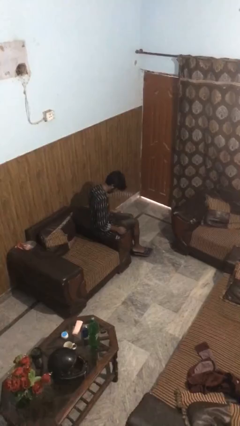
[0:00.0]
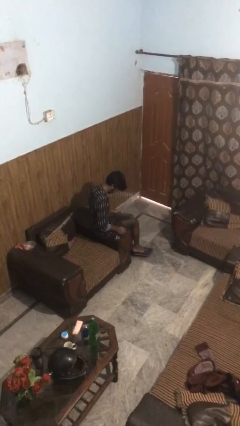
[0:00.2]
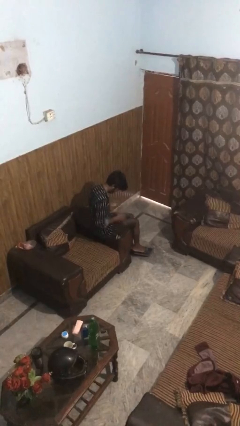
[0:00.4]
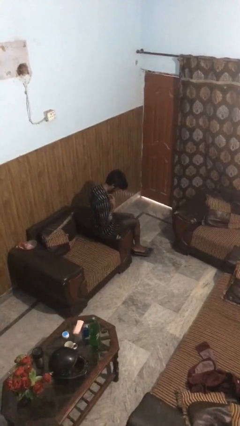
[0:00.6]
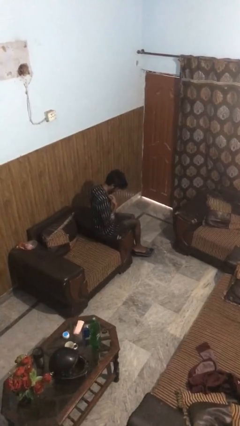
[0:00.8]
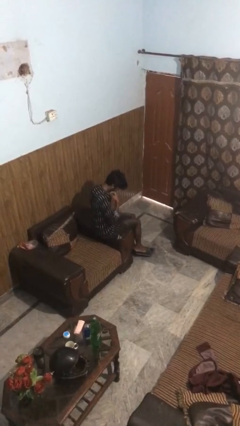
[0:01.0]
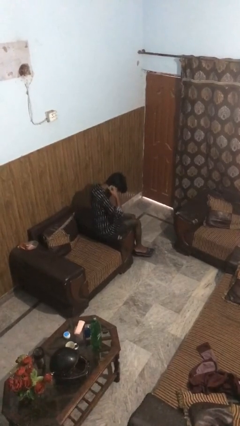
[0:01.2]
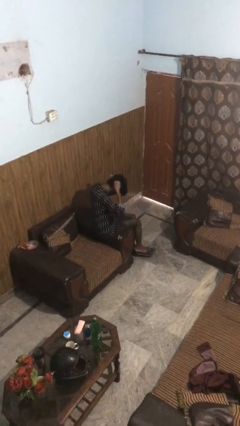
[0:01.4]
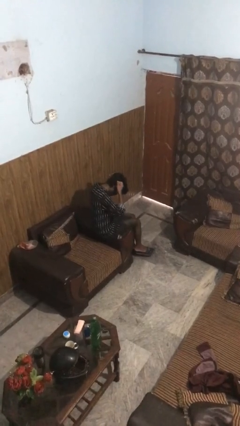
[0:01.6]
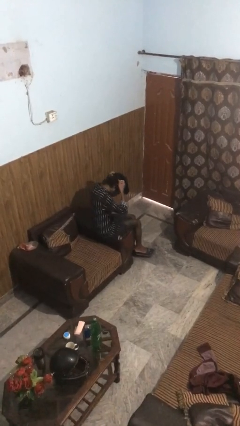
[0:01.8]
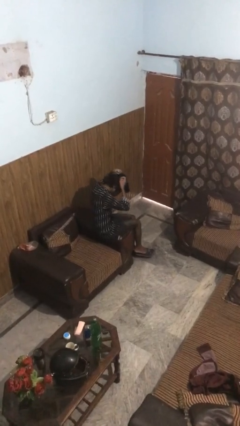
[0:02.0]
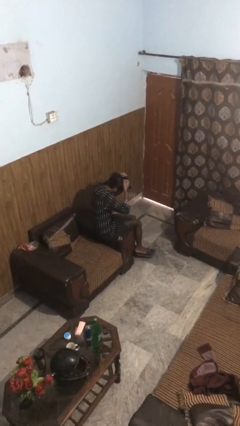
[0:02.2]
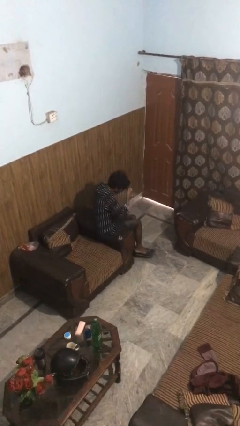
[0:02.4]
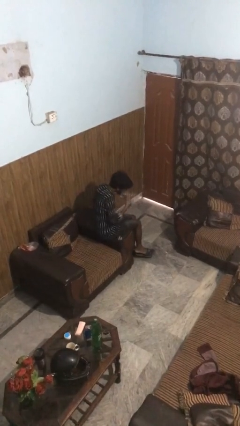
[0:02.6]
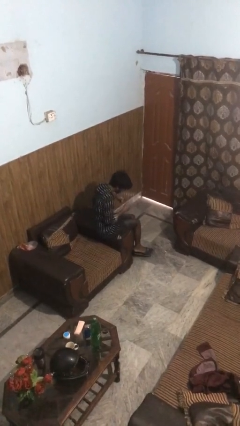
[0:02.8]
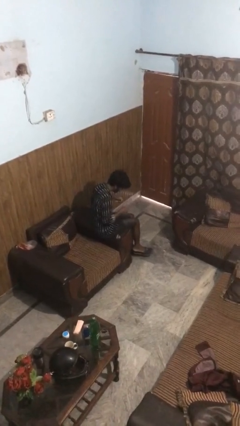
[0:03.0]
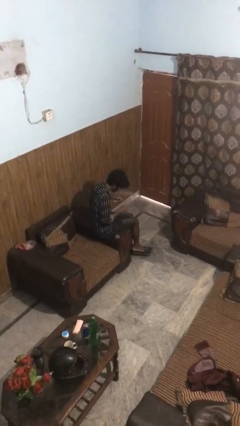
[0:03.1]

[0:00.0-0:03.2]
person takes off necklace

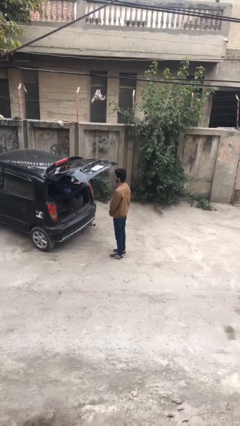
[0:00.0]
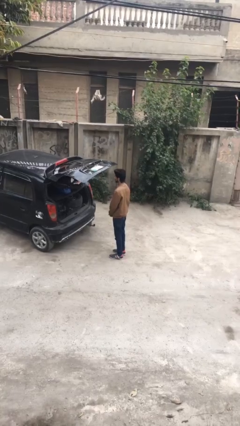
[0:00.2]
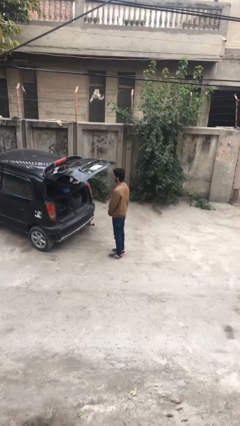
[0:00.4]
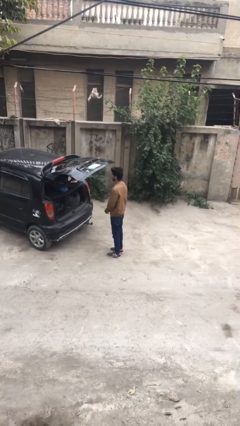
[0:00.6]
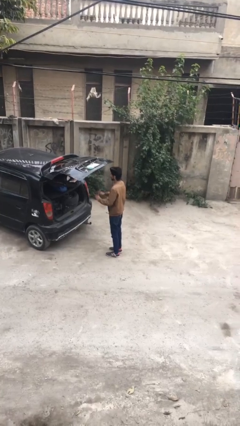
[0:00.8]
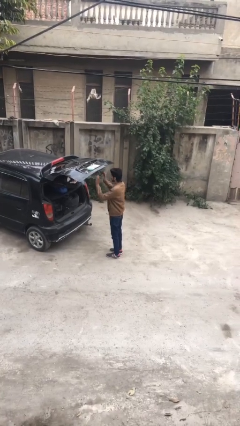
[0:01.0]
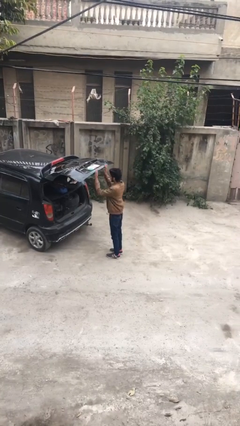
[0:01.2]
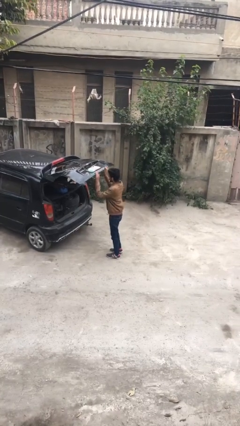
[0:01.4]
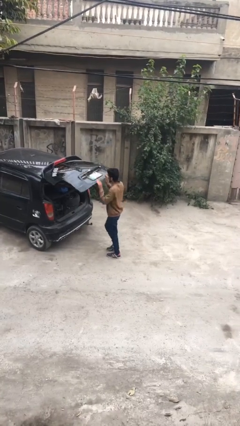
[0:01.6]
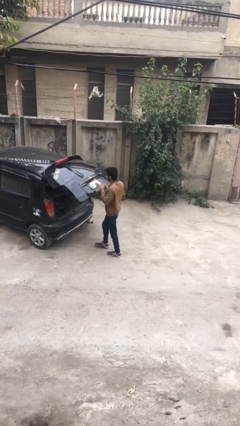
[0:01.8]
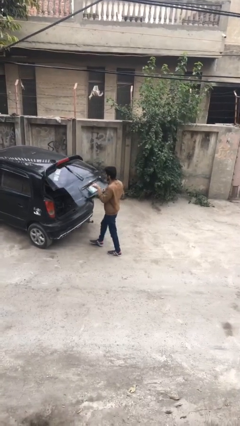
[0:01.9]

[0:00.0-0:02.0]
person closes car trunk

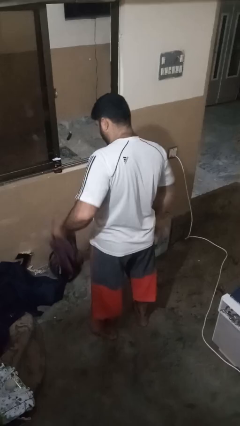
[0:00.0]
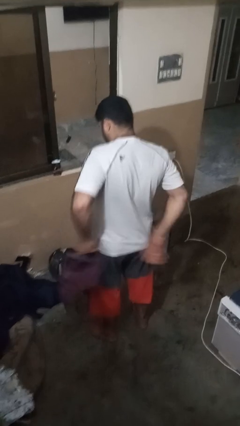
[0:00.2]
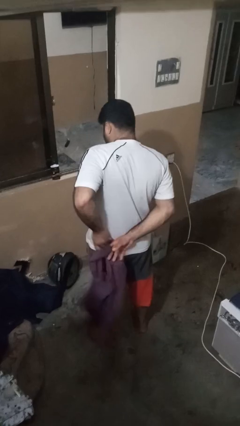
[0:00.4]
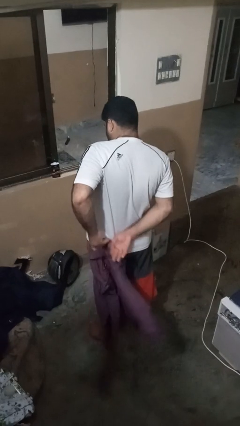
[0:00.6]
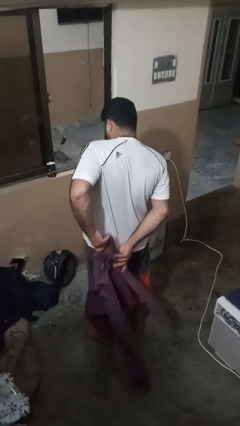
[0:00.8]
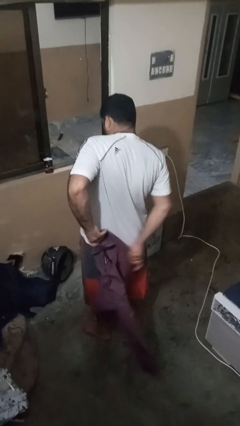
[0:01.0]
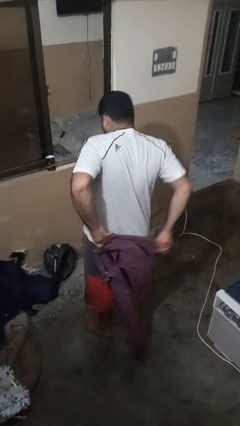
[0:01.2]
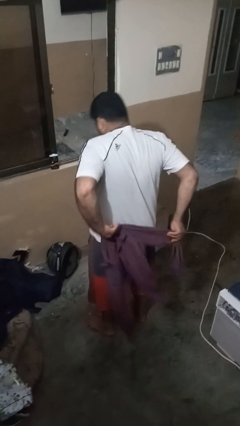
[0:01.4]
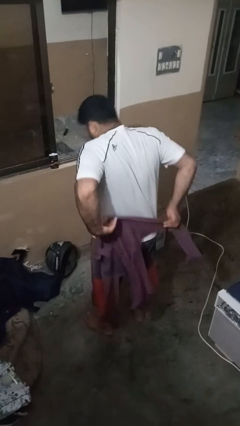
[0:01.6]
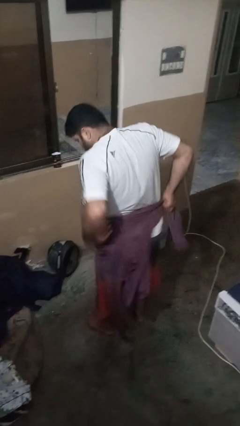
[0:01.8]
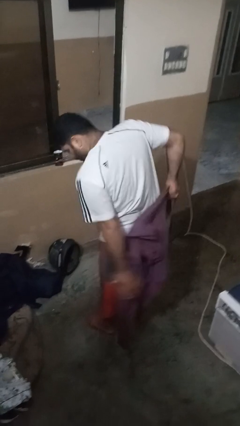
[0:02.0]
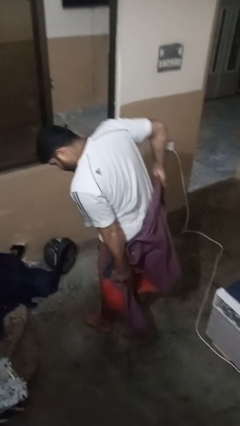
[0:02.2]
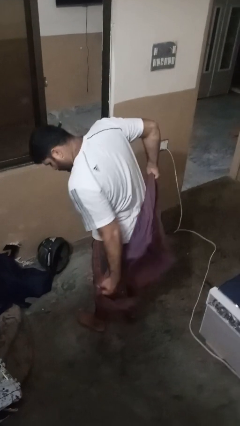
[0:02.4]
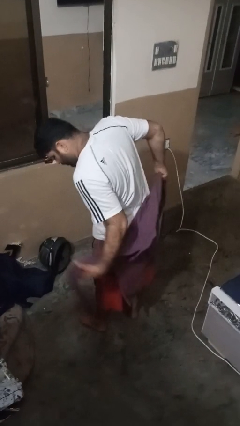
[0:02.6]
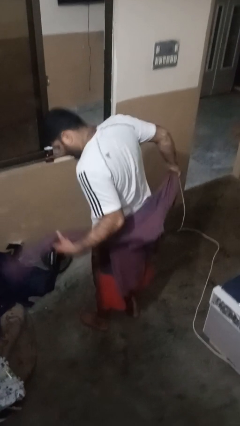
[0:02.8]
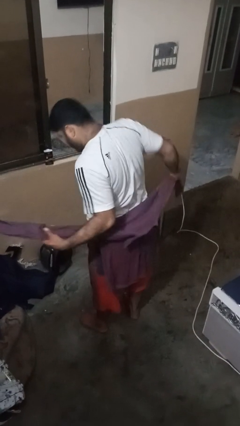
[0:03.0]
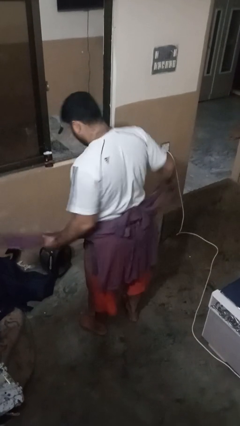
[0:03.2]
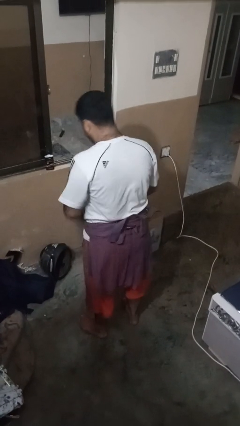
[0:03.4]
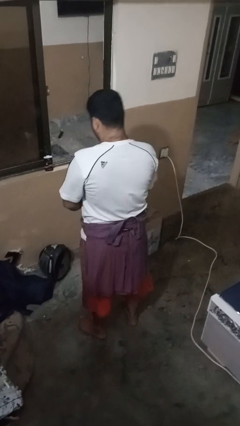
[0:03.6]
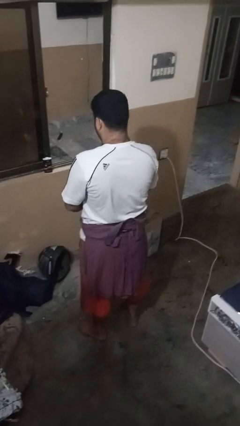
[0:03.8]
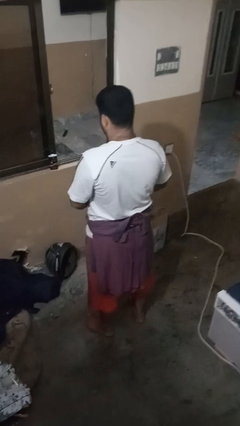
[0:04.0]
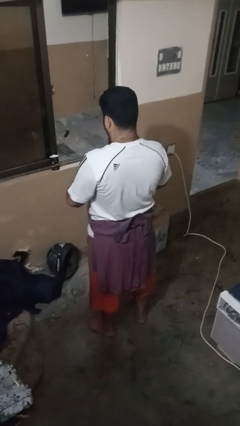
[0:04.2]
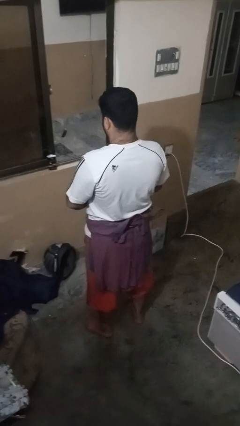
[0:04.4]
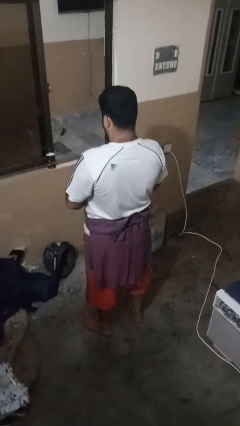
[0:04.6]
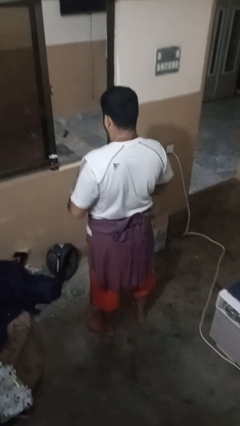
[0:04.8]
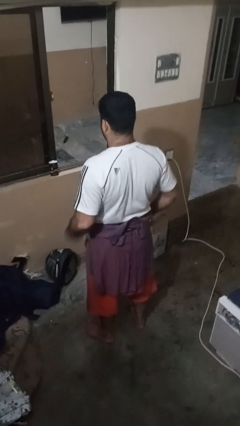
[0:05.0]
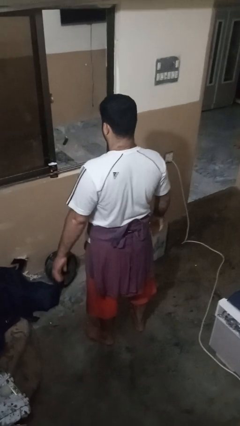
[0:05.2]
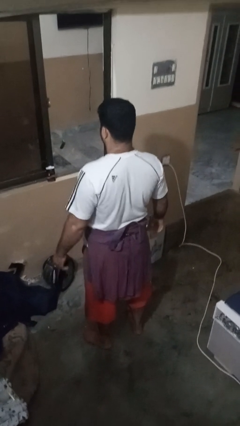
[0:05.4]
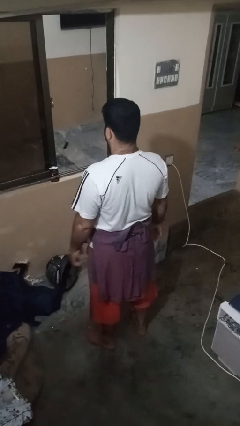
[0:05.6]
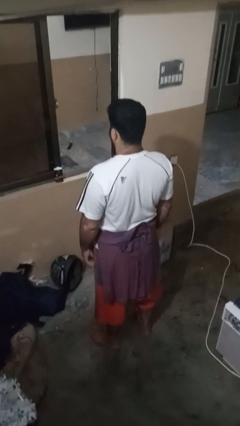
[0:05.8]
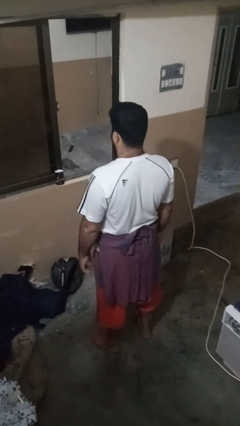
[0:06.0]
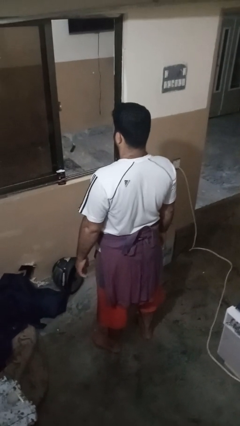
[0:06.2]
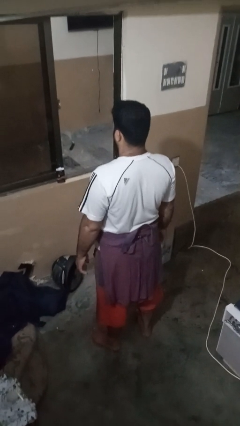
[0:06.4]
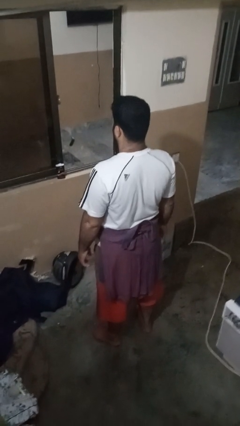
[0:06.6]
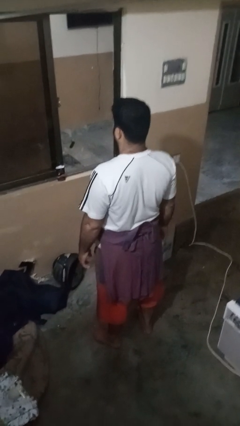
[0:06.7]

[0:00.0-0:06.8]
person ties jacket around waist

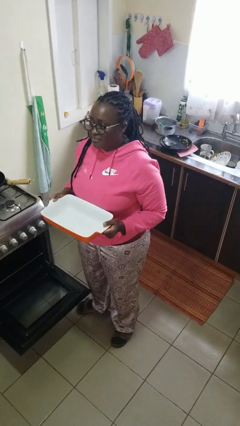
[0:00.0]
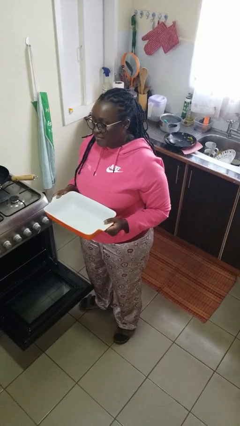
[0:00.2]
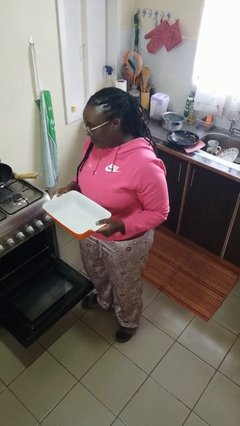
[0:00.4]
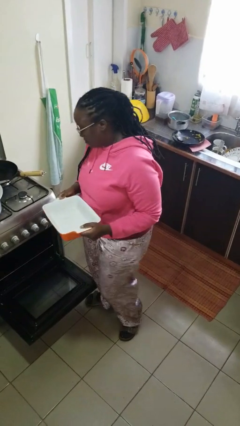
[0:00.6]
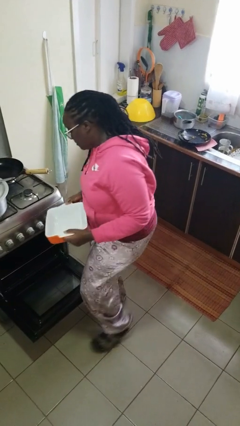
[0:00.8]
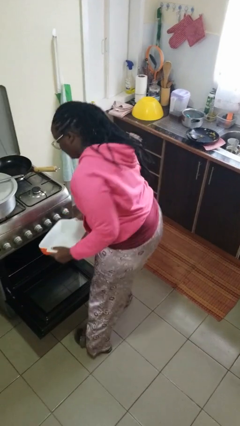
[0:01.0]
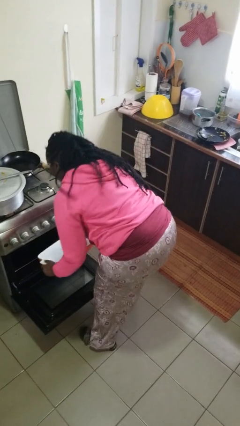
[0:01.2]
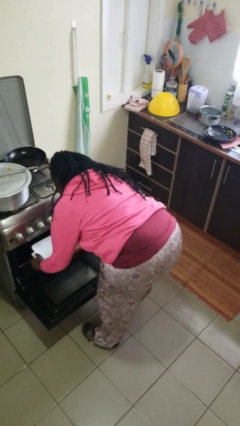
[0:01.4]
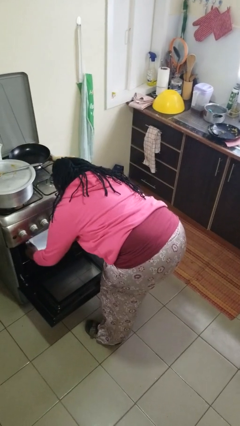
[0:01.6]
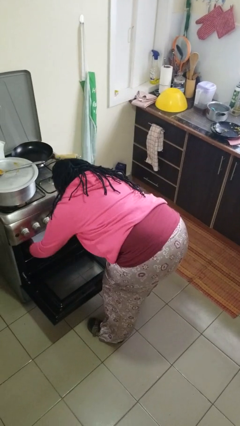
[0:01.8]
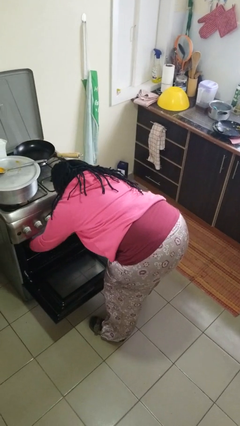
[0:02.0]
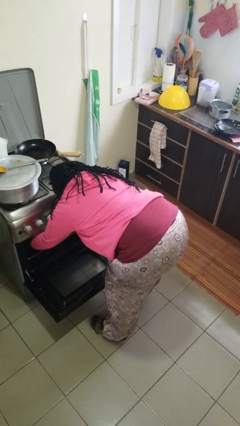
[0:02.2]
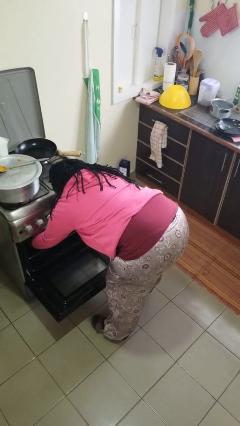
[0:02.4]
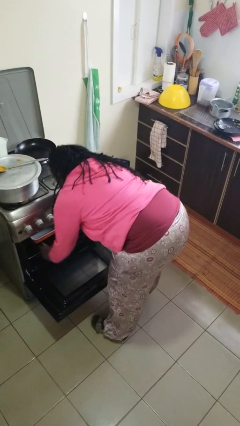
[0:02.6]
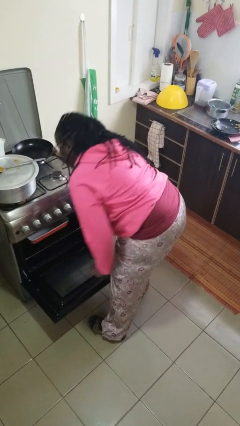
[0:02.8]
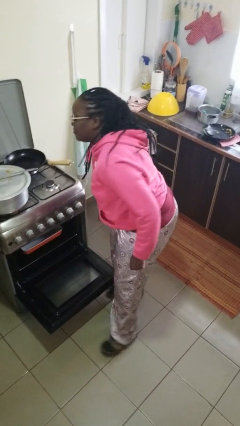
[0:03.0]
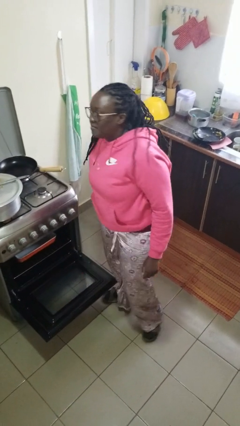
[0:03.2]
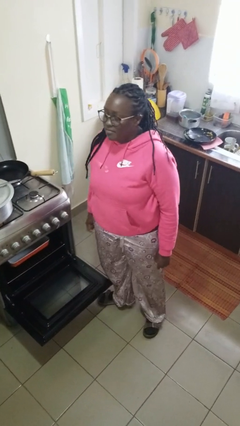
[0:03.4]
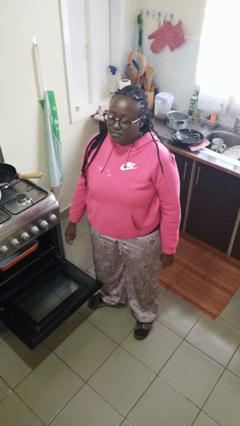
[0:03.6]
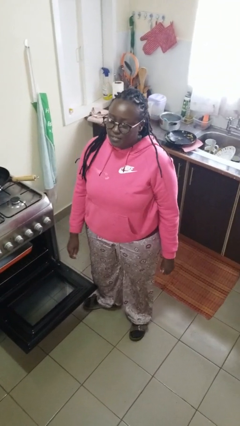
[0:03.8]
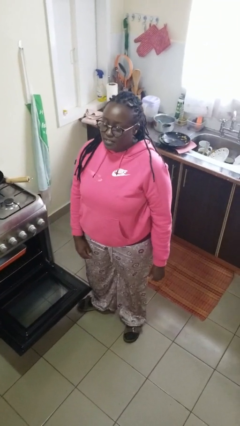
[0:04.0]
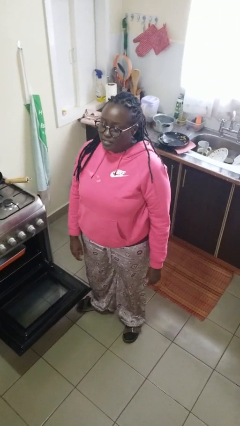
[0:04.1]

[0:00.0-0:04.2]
person puts object into oven

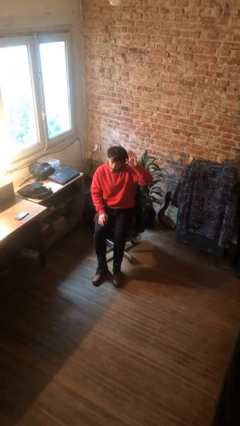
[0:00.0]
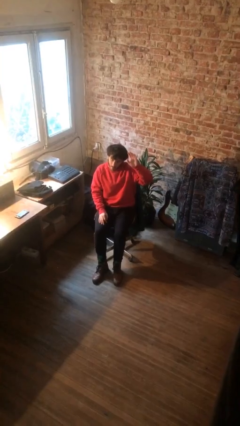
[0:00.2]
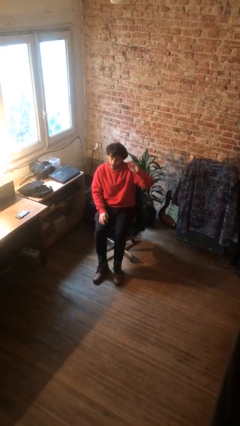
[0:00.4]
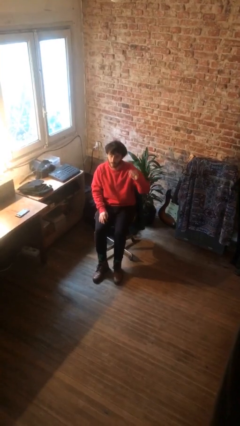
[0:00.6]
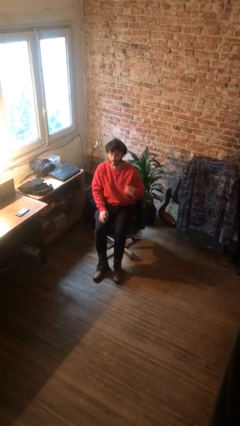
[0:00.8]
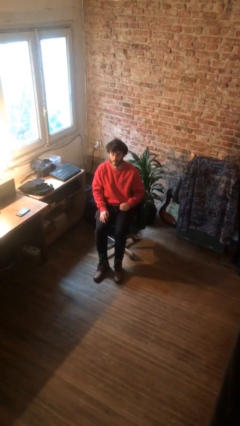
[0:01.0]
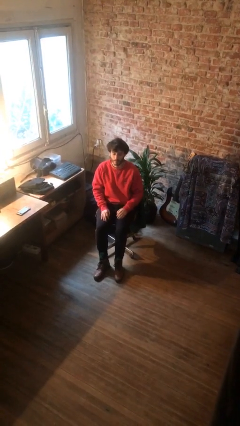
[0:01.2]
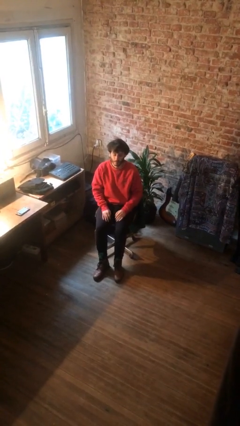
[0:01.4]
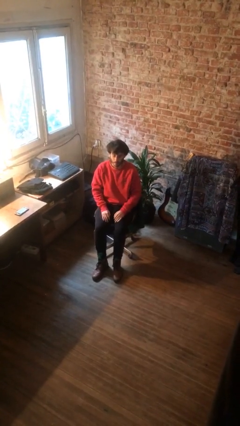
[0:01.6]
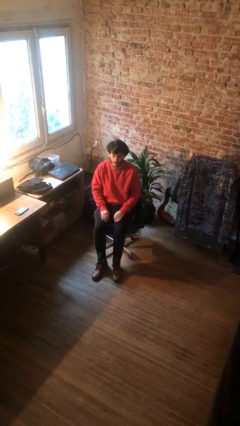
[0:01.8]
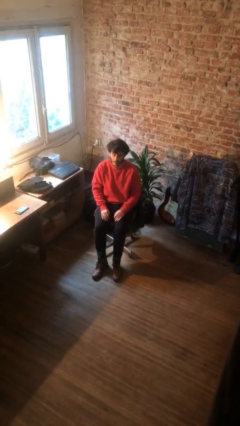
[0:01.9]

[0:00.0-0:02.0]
person gestures lower hand
